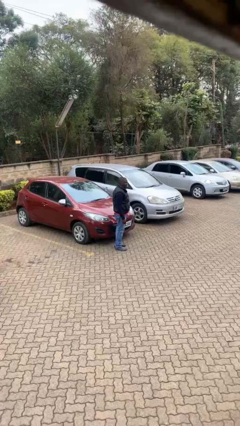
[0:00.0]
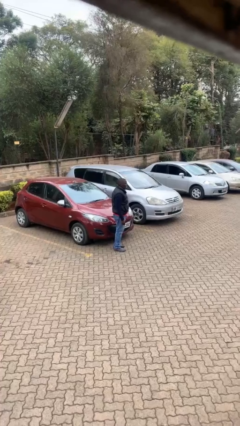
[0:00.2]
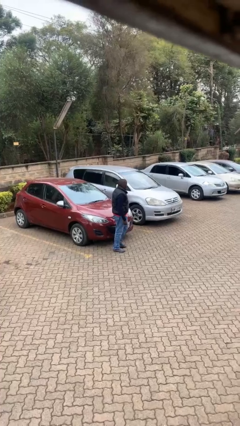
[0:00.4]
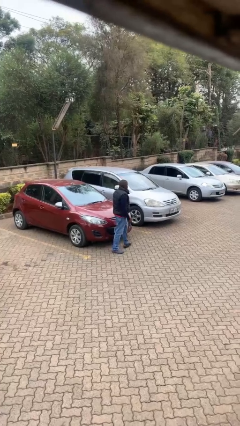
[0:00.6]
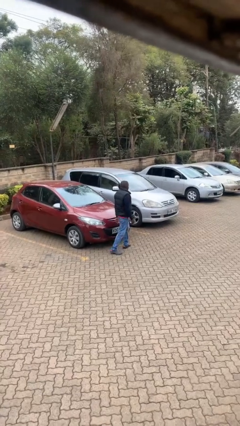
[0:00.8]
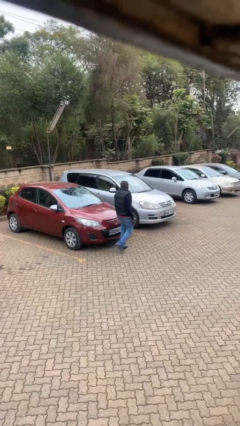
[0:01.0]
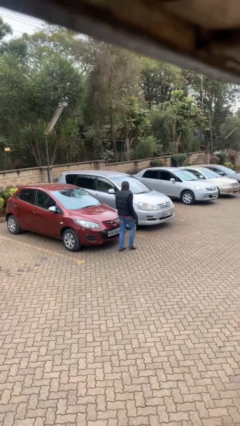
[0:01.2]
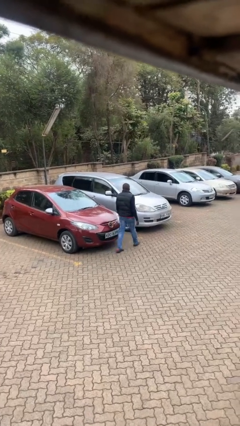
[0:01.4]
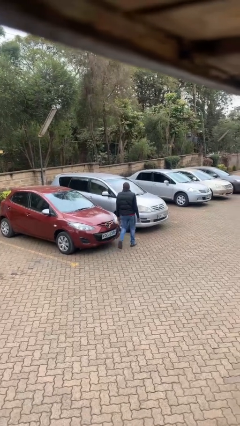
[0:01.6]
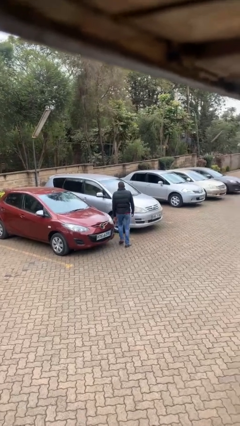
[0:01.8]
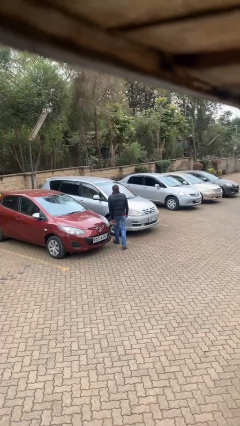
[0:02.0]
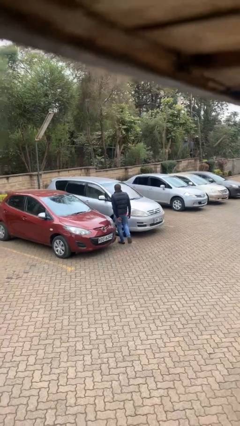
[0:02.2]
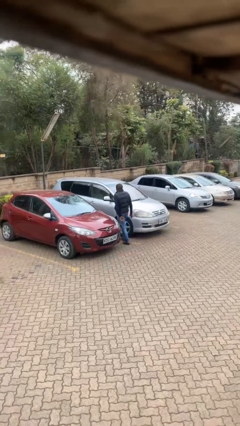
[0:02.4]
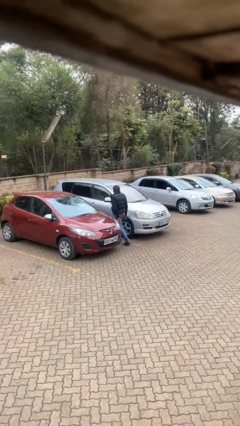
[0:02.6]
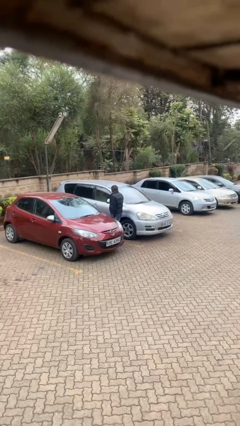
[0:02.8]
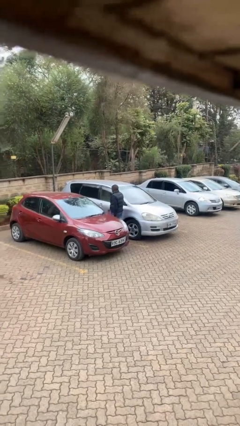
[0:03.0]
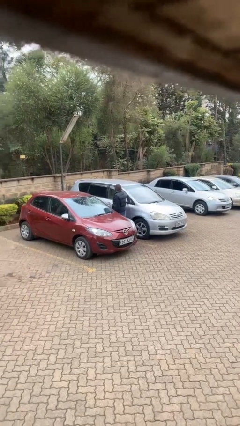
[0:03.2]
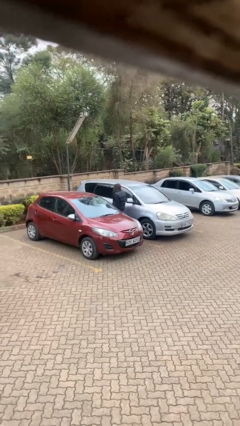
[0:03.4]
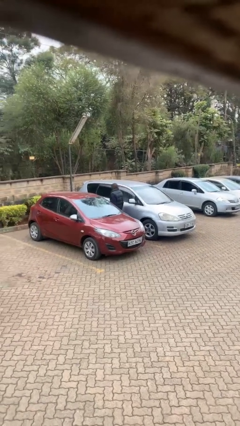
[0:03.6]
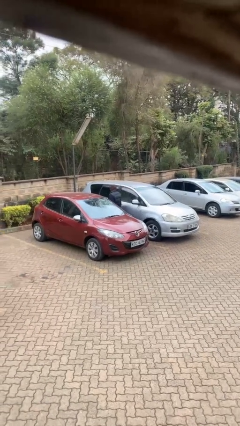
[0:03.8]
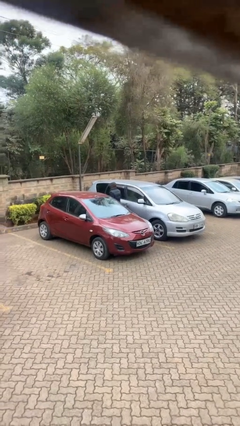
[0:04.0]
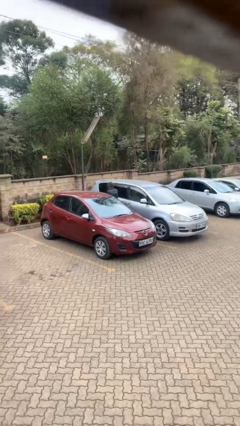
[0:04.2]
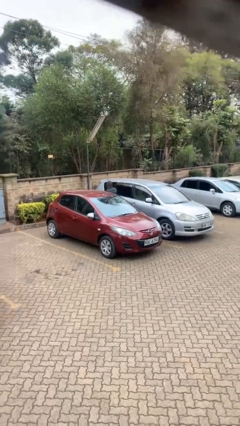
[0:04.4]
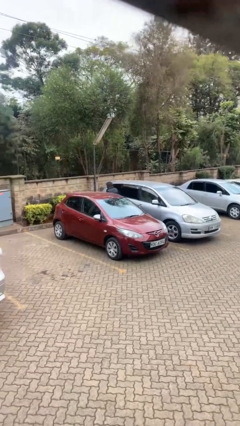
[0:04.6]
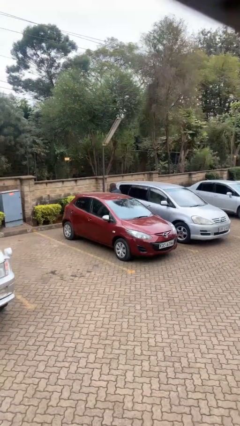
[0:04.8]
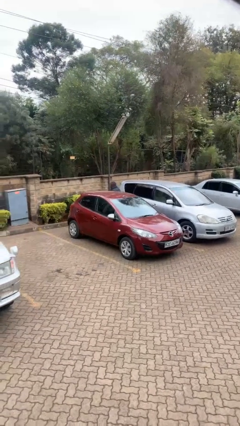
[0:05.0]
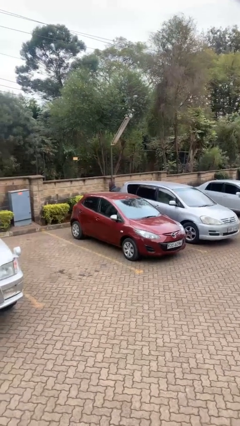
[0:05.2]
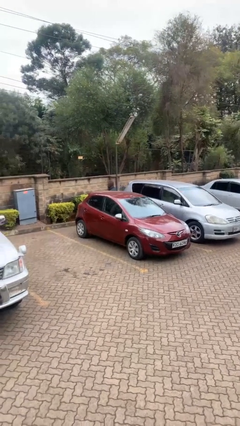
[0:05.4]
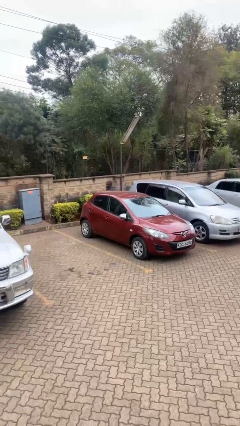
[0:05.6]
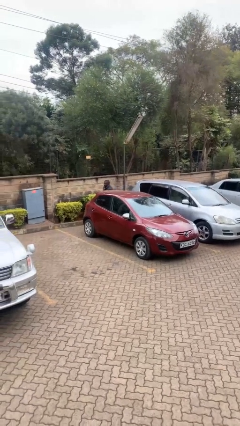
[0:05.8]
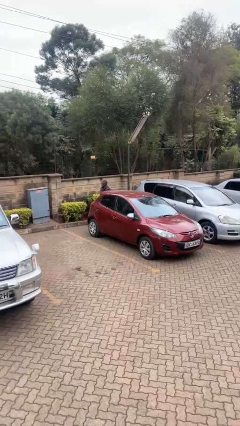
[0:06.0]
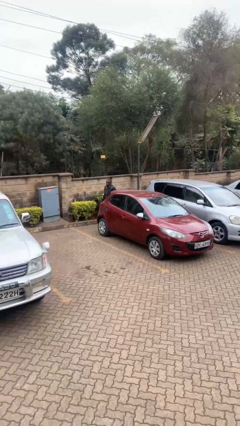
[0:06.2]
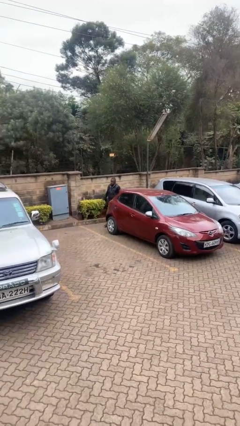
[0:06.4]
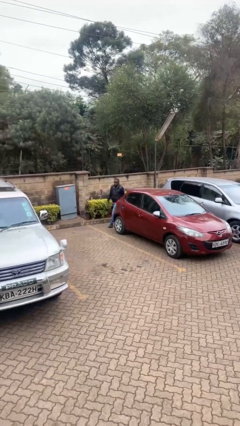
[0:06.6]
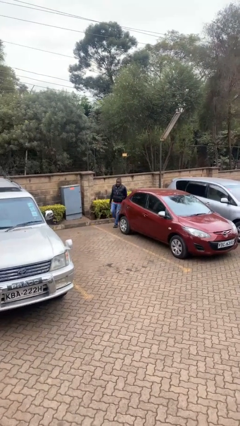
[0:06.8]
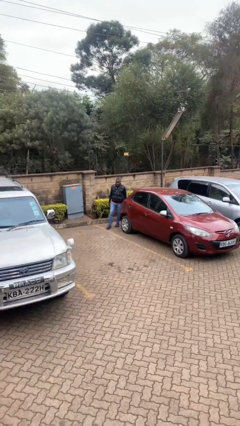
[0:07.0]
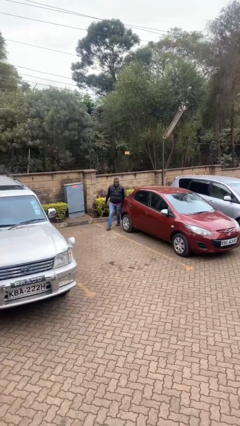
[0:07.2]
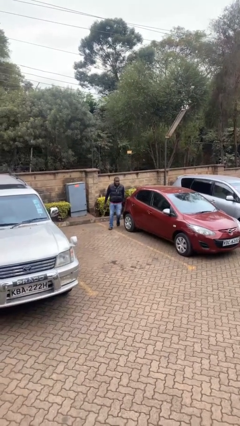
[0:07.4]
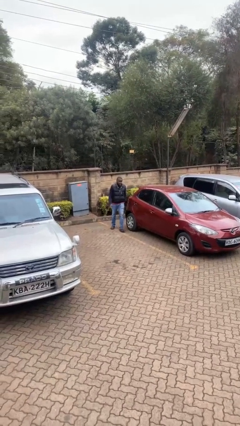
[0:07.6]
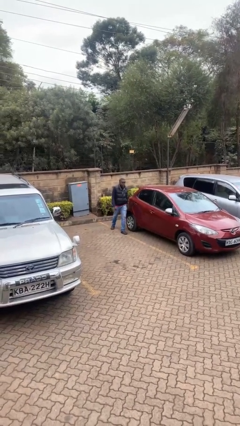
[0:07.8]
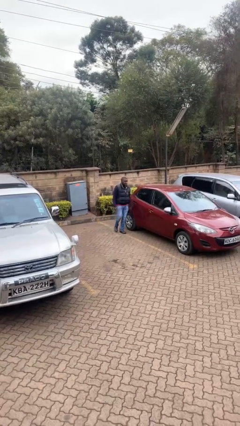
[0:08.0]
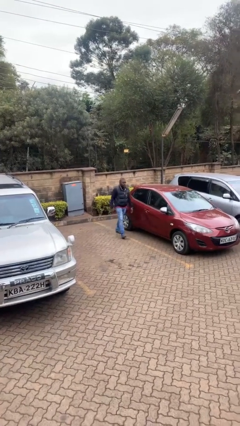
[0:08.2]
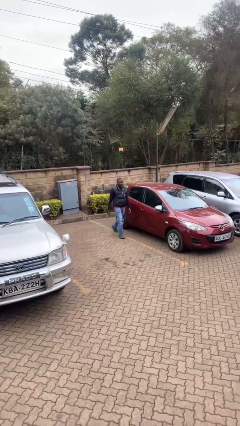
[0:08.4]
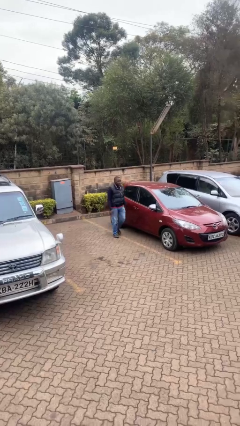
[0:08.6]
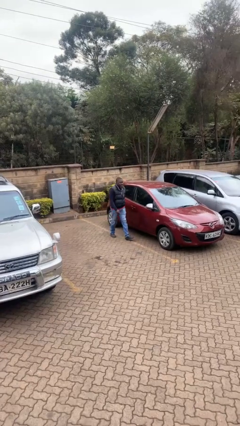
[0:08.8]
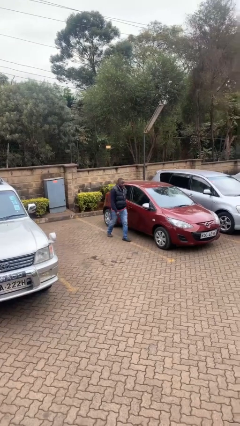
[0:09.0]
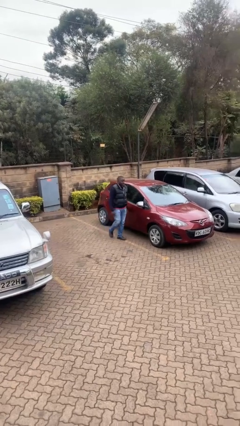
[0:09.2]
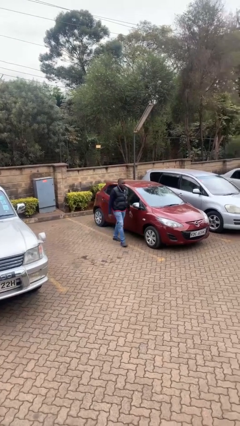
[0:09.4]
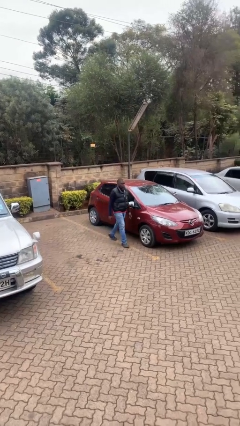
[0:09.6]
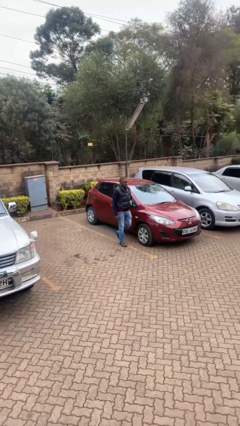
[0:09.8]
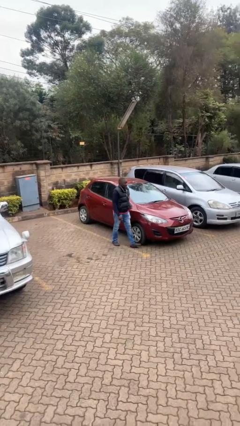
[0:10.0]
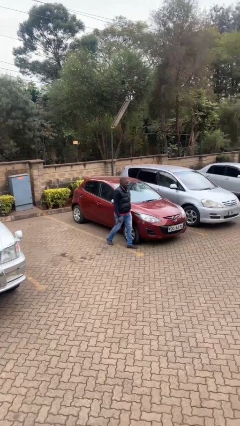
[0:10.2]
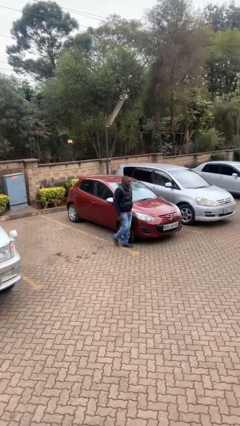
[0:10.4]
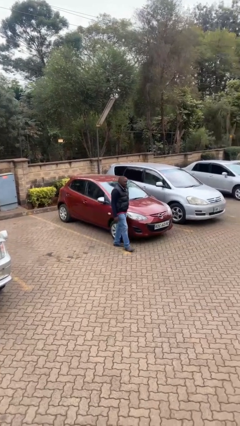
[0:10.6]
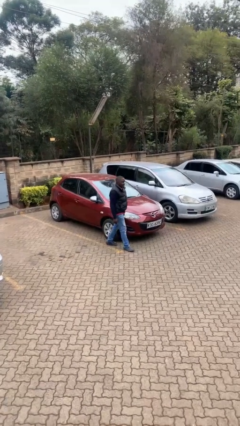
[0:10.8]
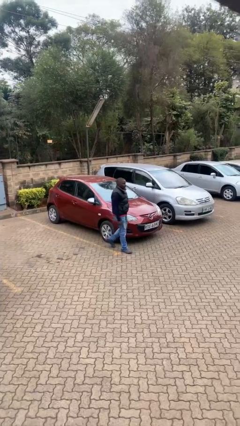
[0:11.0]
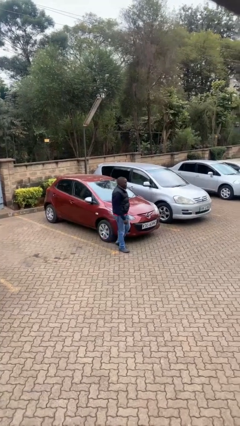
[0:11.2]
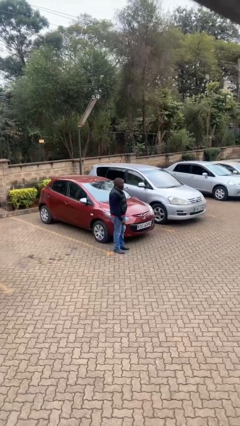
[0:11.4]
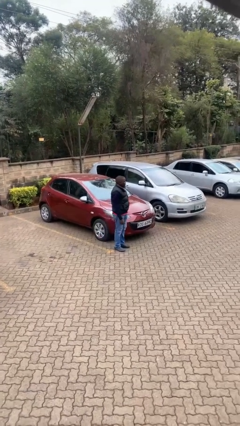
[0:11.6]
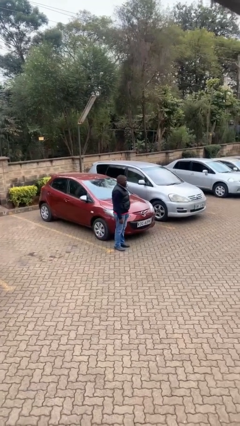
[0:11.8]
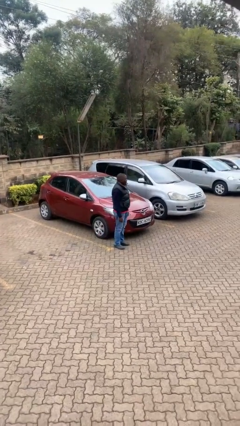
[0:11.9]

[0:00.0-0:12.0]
person walks around car

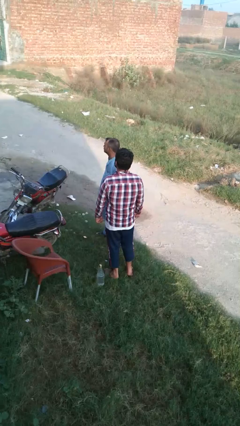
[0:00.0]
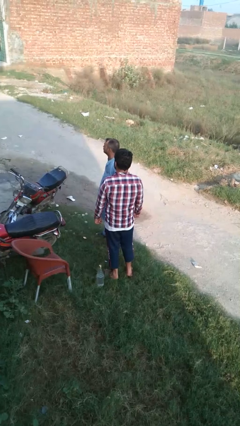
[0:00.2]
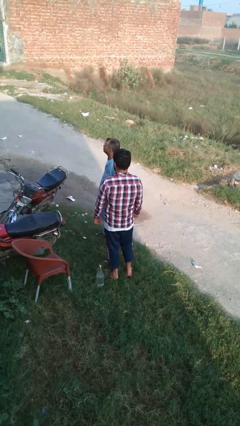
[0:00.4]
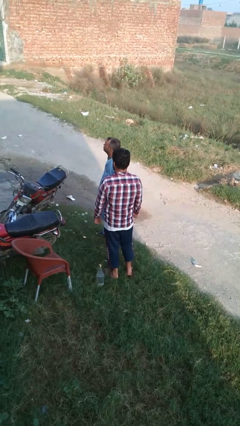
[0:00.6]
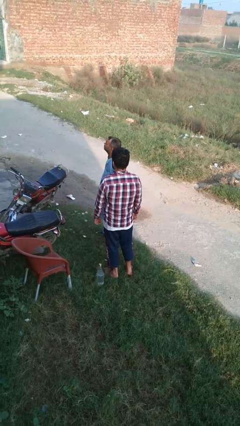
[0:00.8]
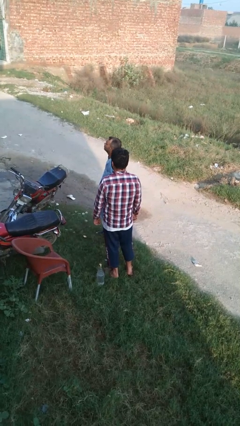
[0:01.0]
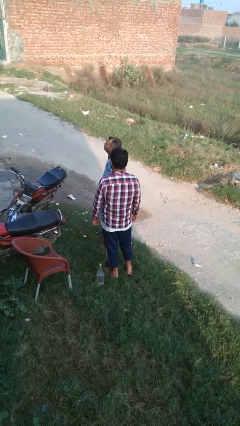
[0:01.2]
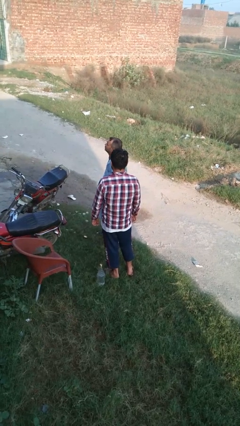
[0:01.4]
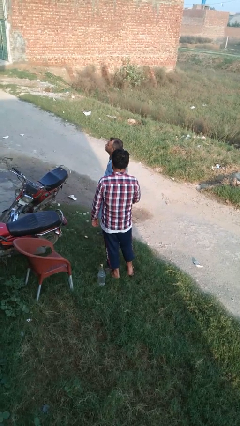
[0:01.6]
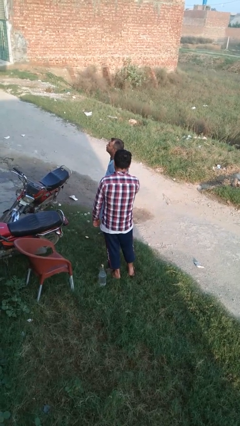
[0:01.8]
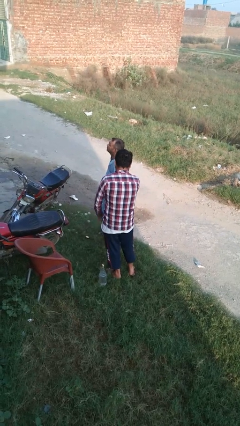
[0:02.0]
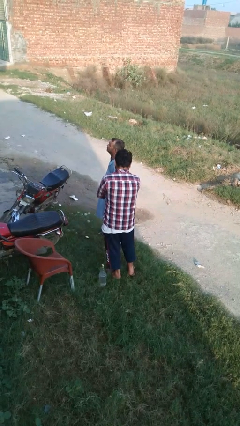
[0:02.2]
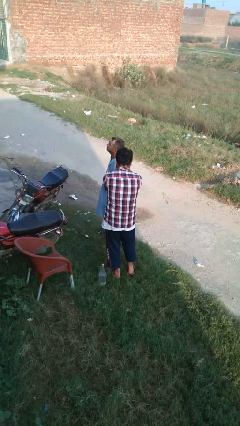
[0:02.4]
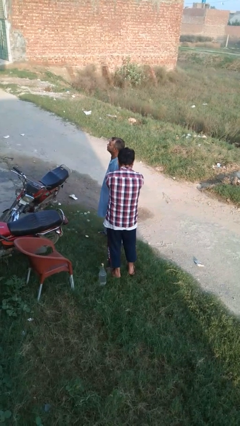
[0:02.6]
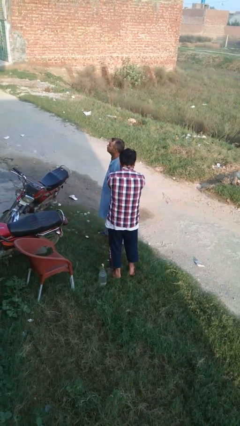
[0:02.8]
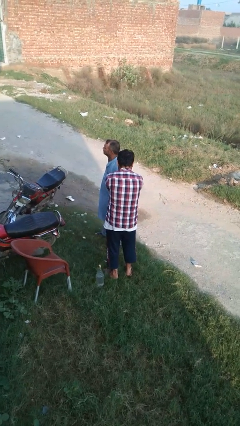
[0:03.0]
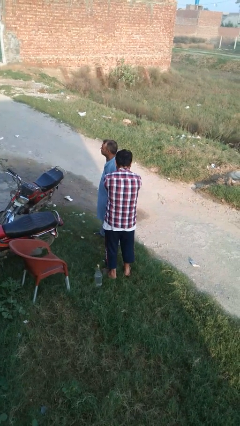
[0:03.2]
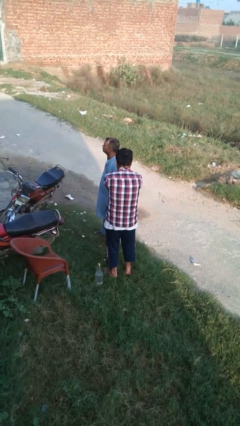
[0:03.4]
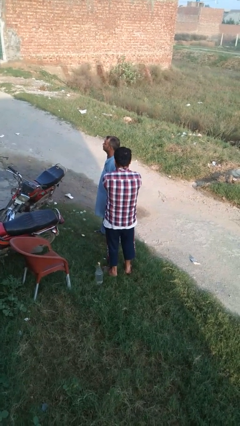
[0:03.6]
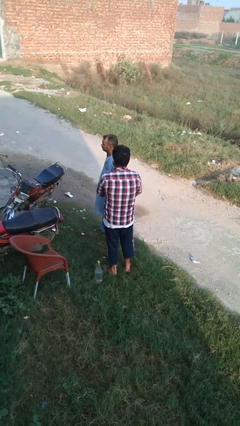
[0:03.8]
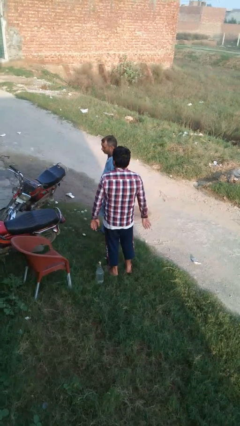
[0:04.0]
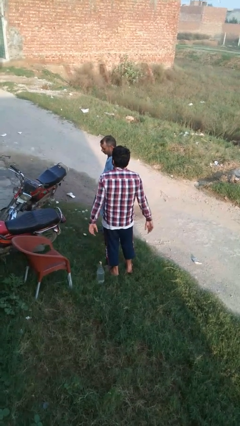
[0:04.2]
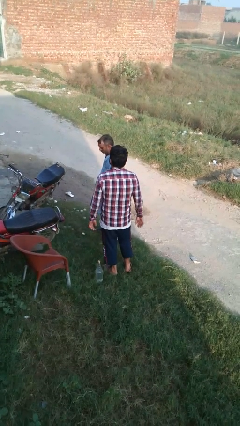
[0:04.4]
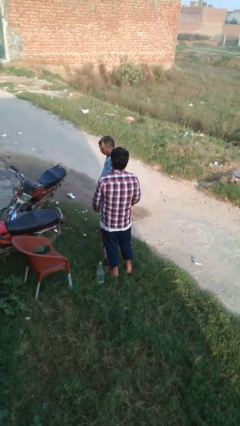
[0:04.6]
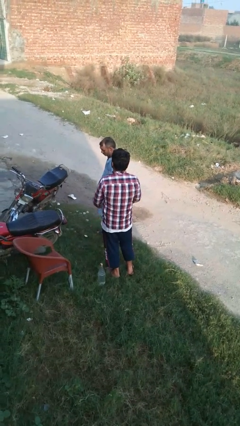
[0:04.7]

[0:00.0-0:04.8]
person grabs person by forearm

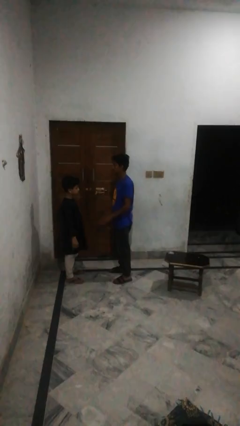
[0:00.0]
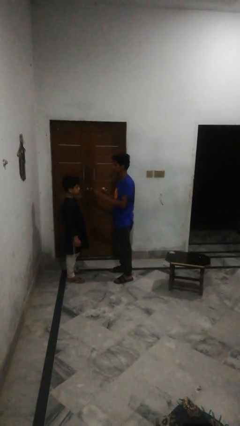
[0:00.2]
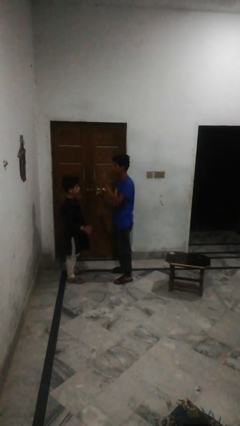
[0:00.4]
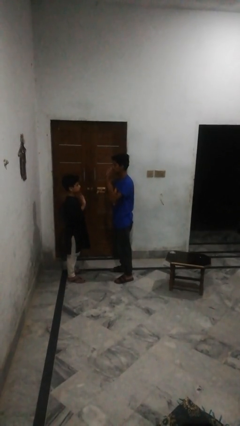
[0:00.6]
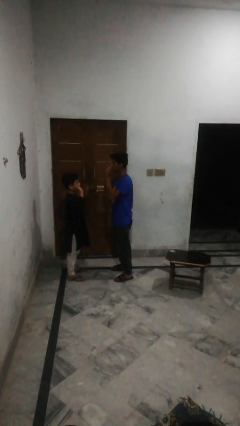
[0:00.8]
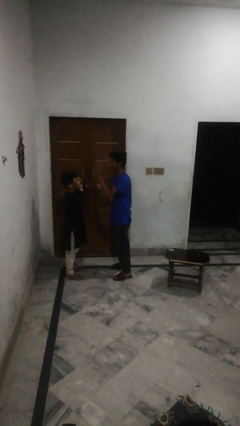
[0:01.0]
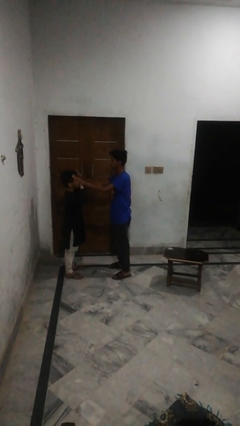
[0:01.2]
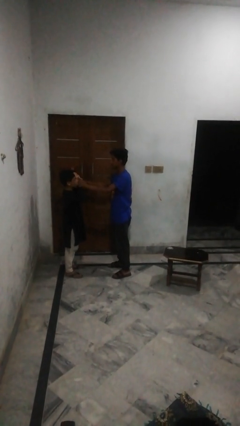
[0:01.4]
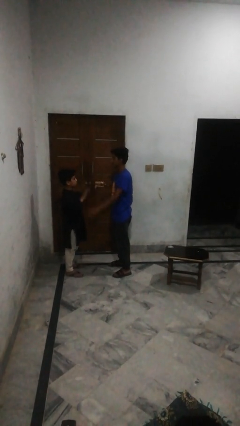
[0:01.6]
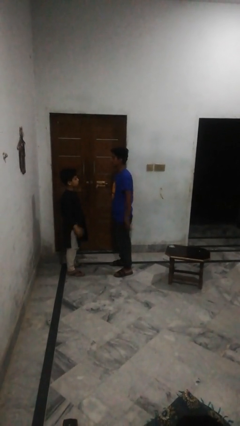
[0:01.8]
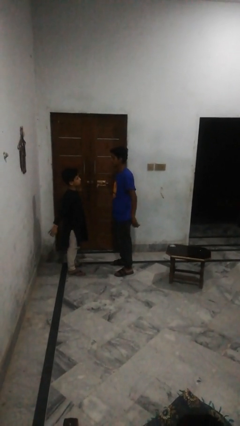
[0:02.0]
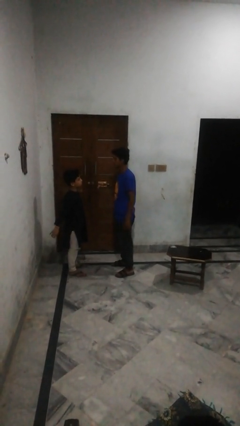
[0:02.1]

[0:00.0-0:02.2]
person highfives hand
